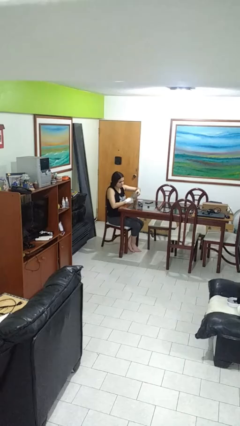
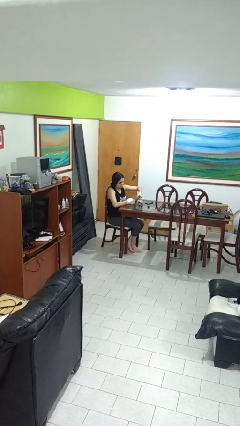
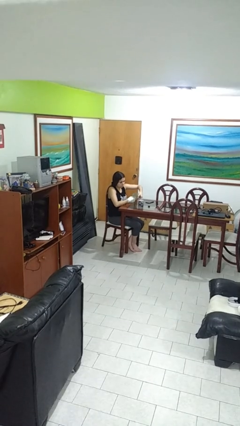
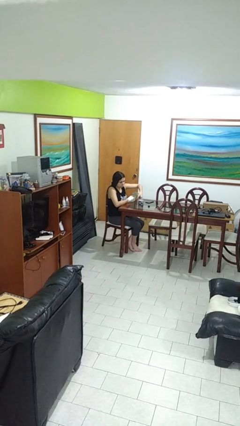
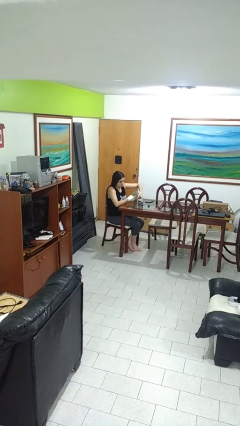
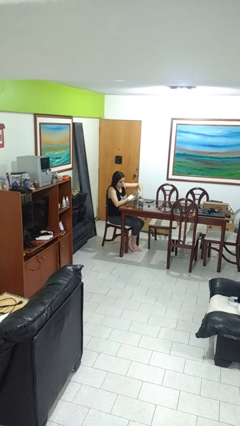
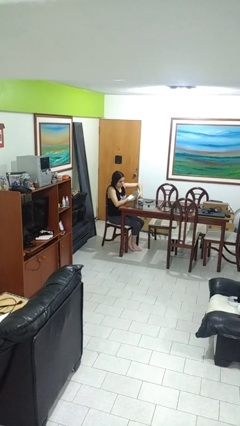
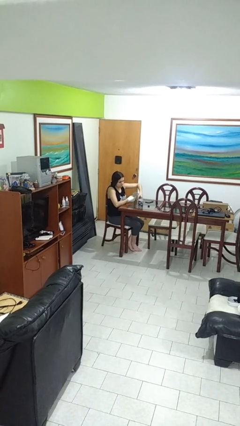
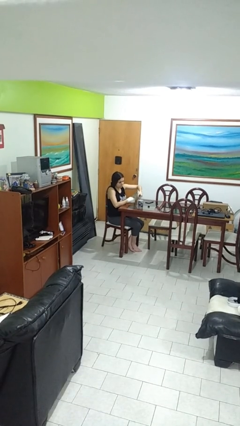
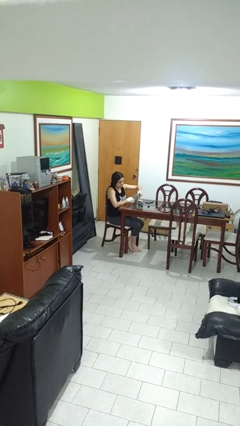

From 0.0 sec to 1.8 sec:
person pours liquid into cup

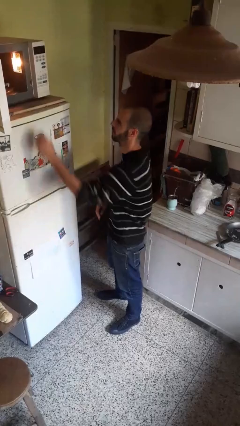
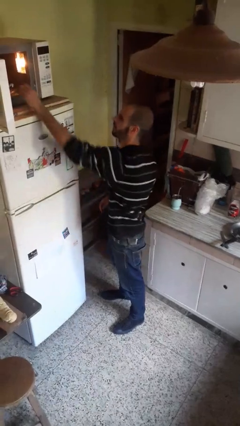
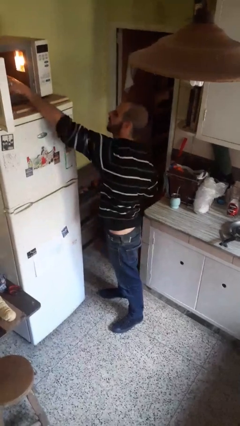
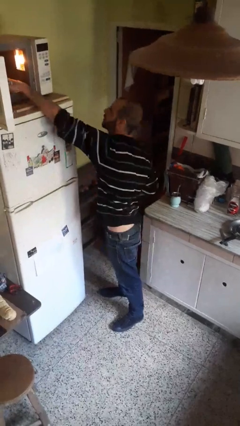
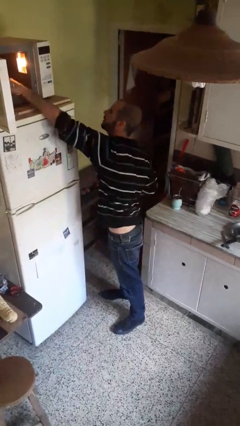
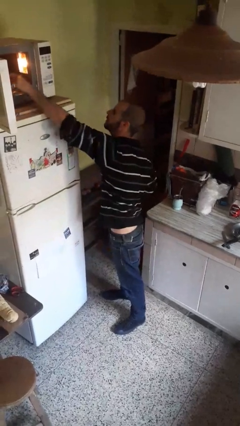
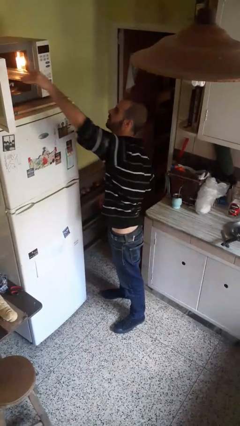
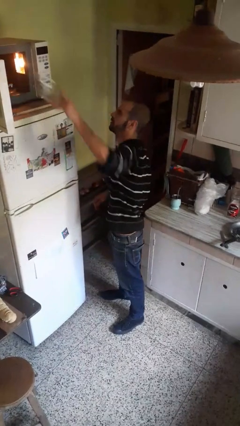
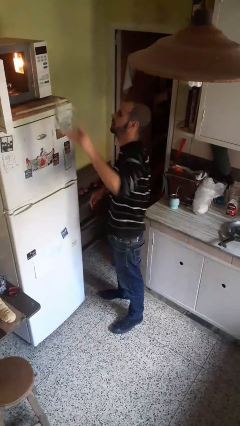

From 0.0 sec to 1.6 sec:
person takes object from microwave

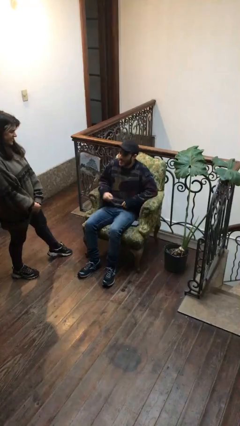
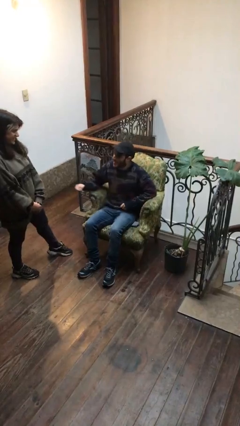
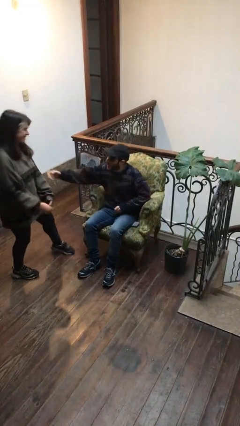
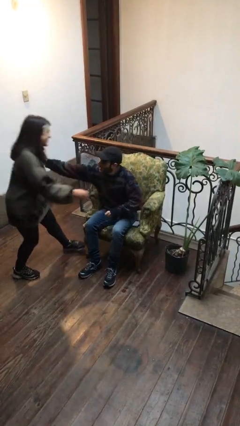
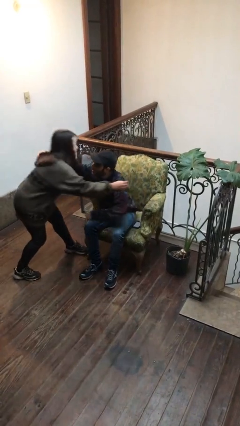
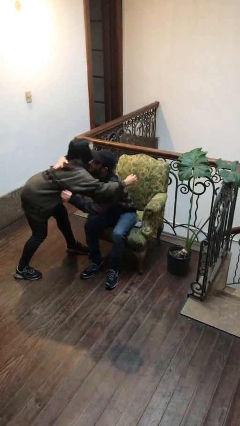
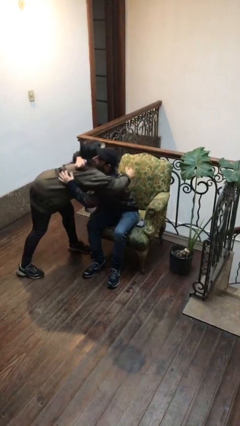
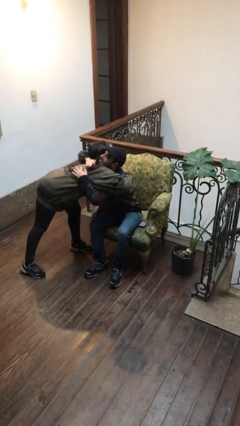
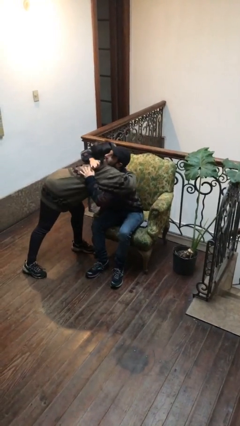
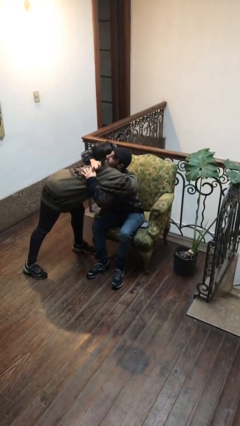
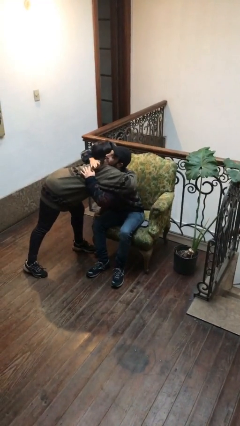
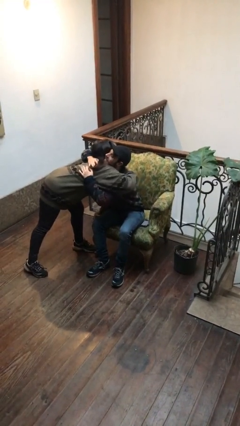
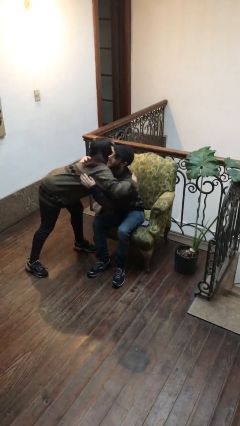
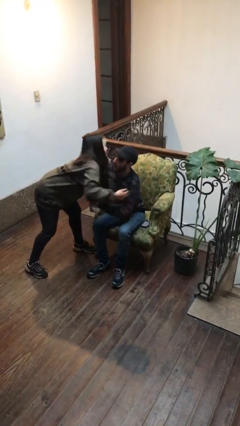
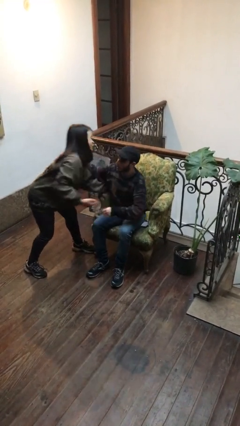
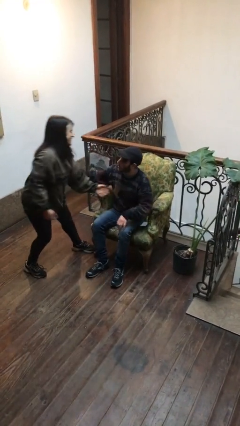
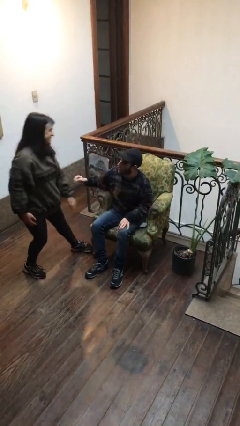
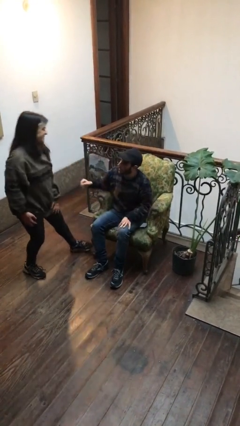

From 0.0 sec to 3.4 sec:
person embraces person

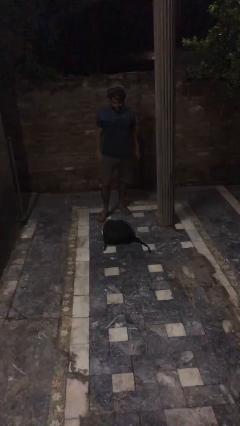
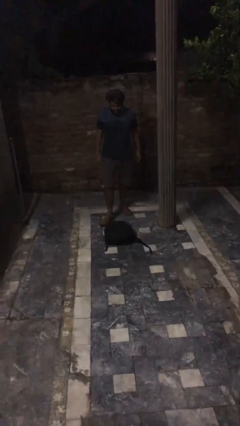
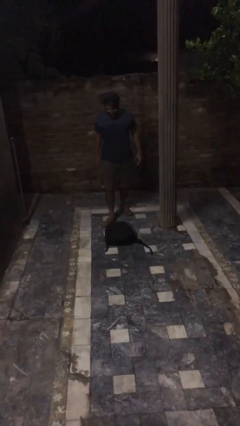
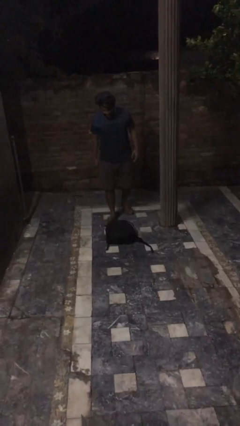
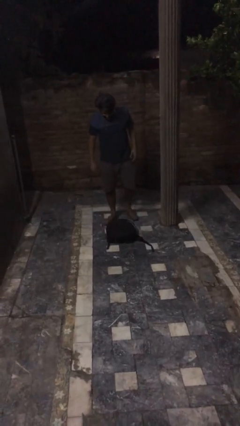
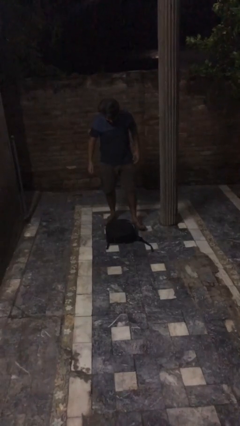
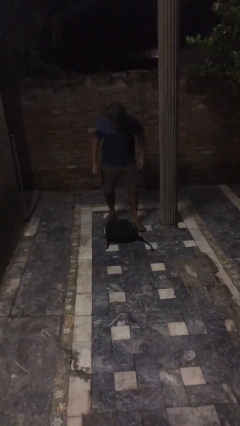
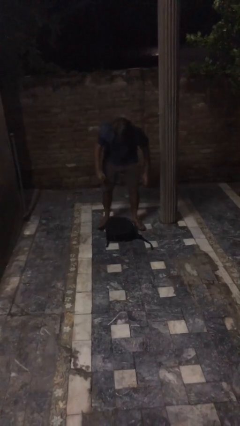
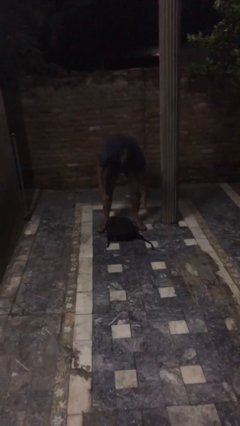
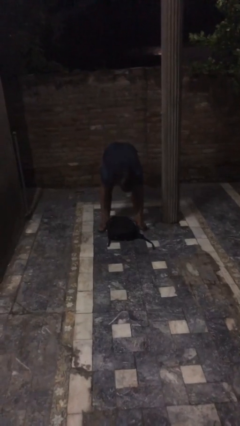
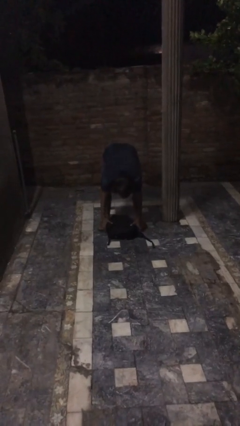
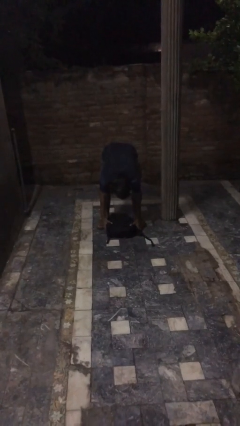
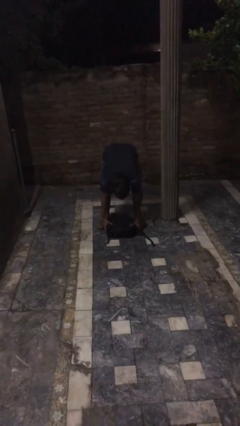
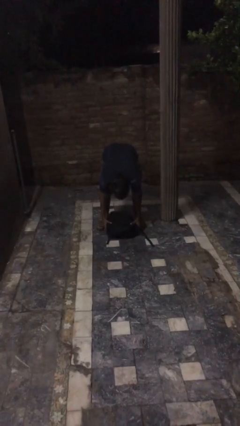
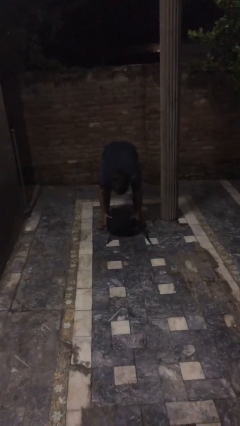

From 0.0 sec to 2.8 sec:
person picks up object from floor

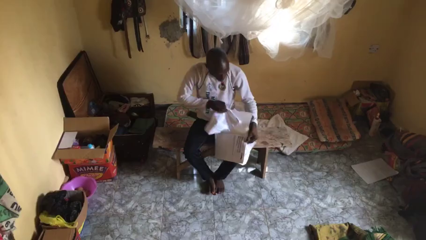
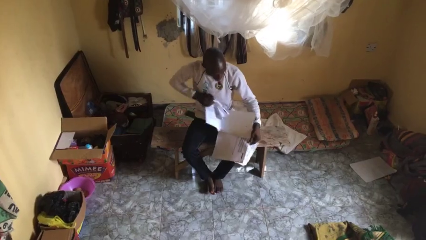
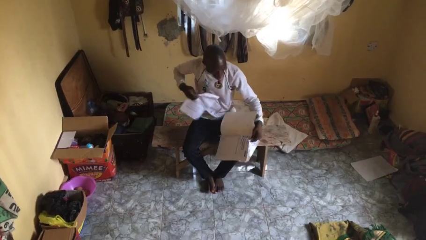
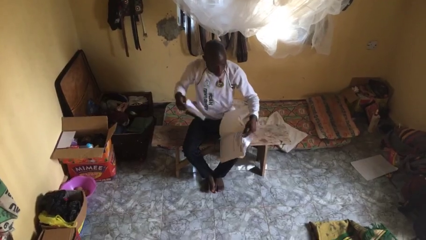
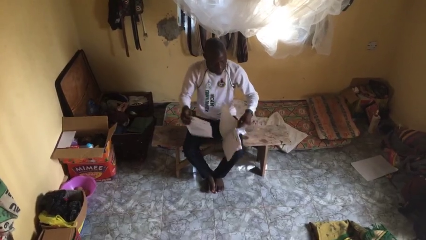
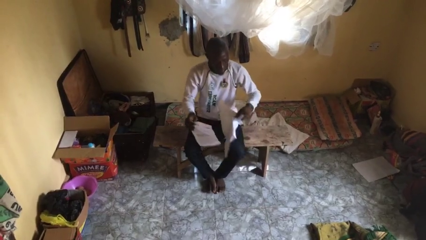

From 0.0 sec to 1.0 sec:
person tears paper

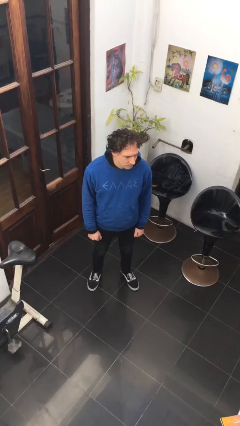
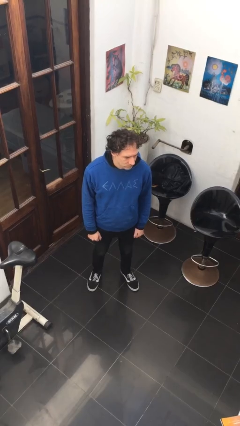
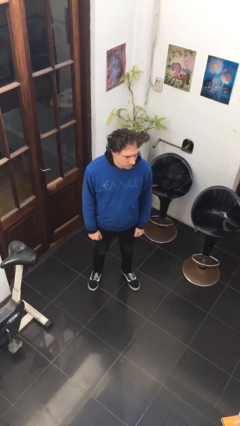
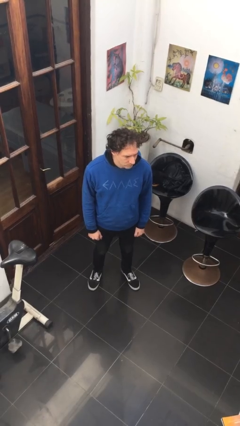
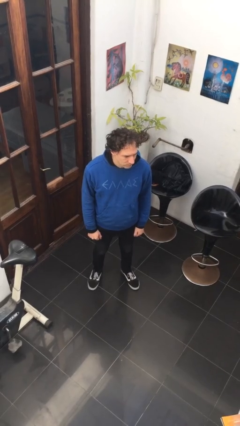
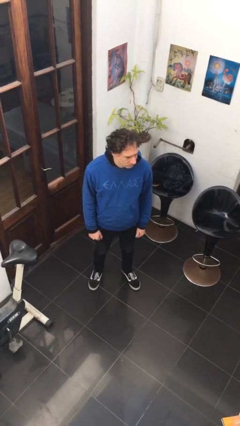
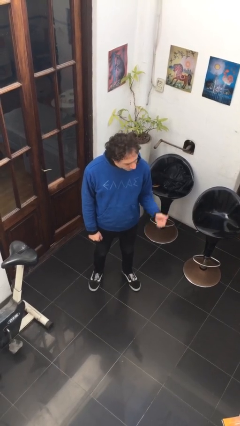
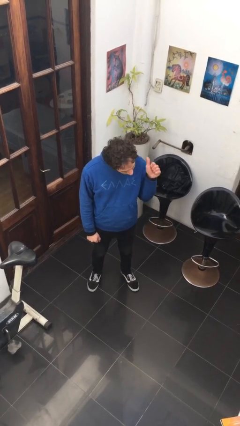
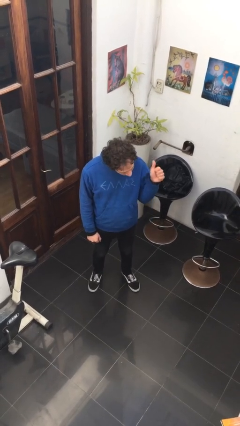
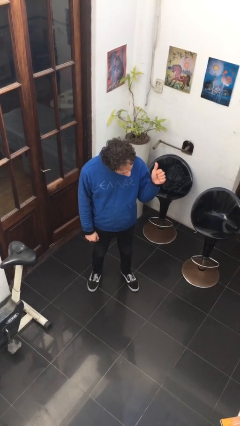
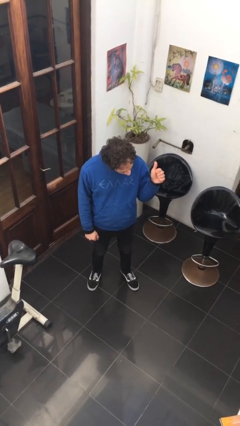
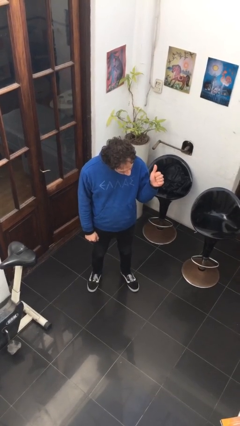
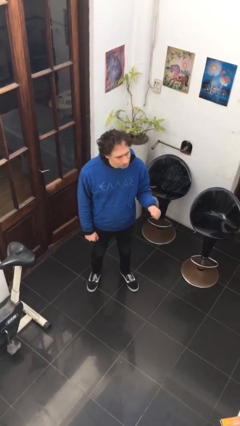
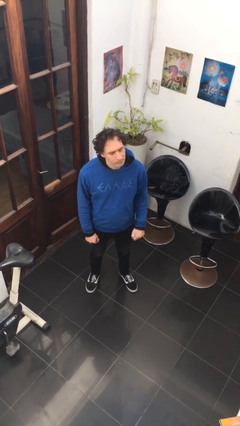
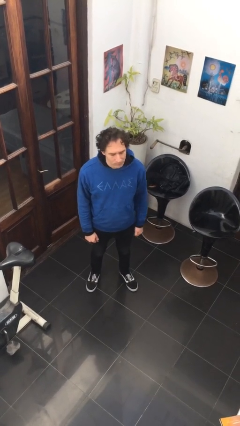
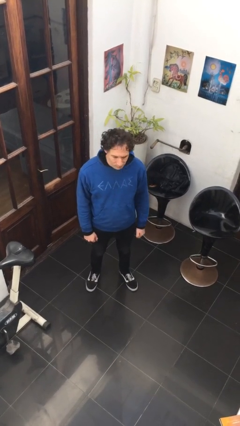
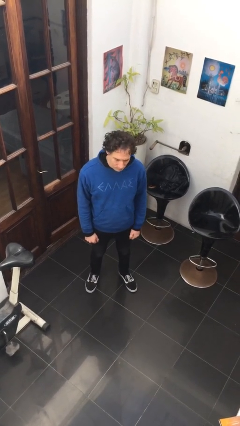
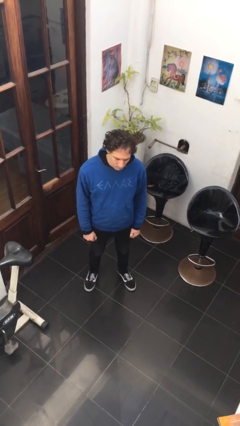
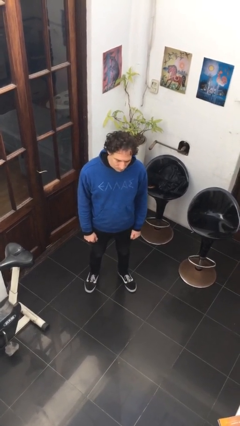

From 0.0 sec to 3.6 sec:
person gestures thumbs up

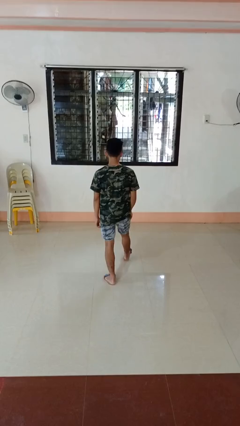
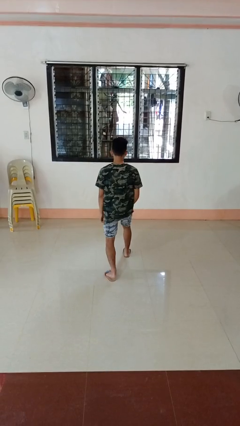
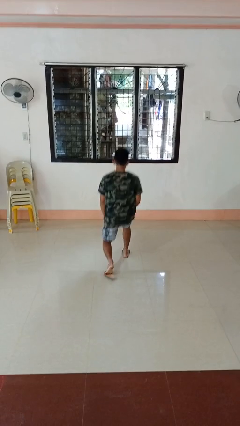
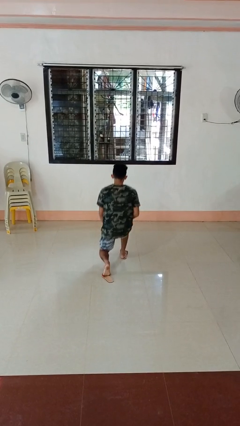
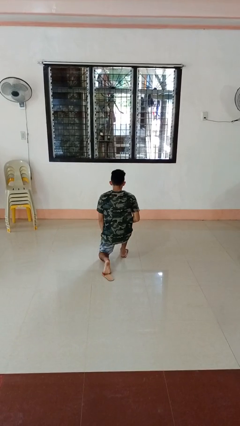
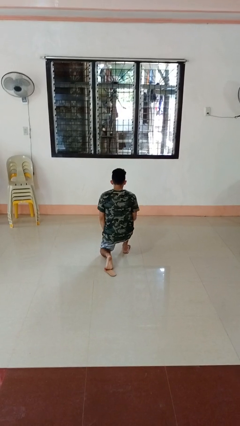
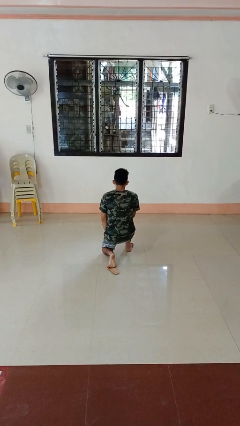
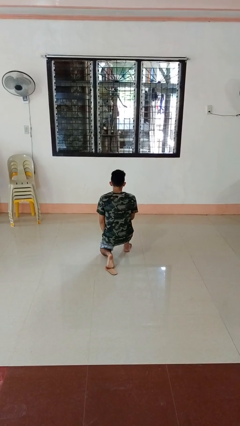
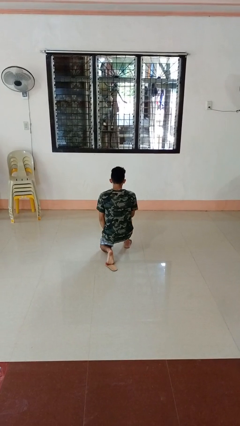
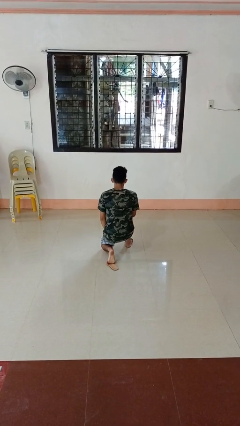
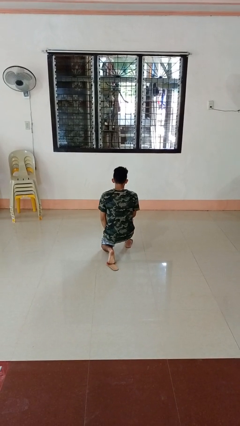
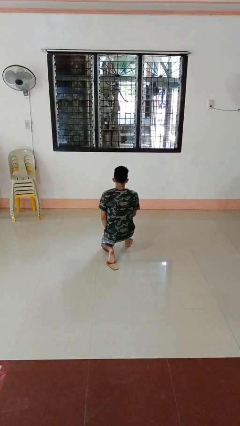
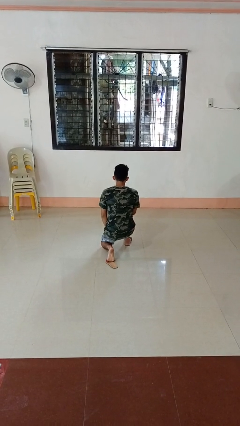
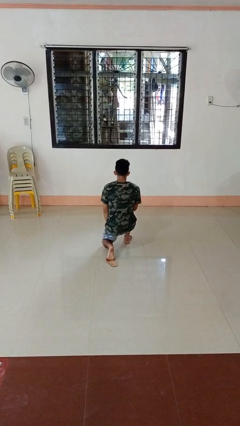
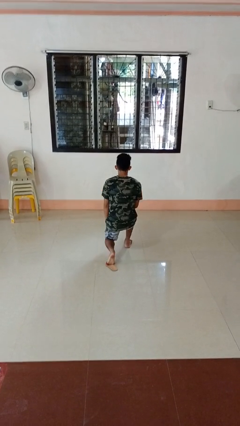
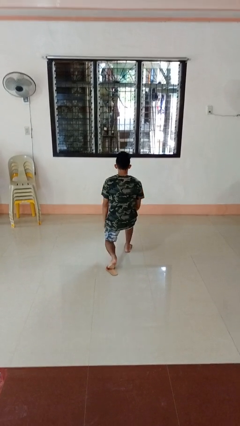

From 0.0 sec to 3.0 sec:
person kneels
